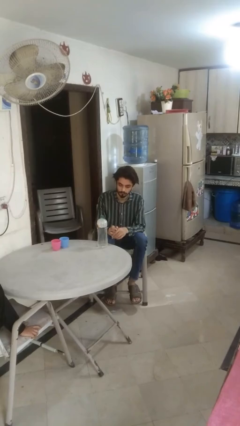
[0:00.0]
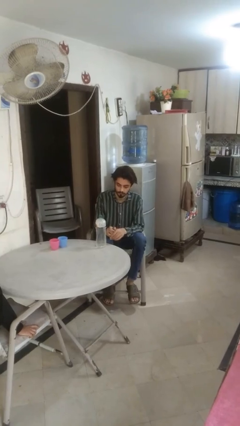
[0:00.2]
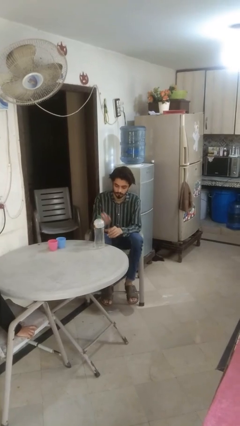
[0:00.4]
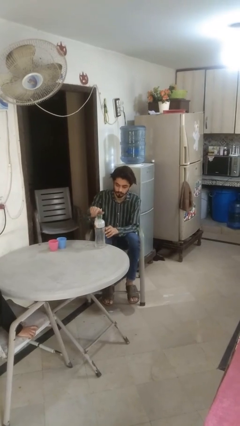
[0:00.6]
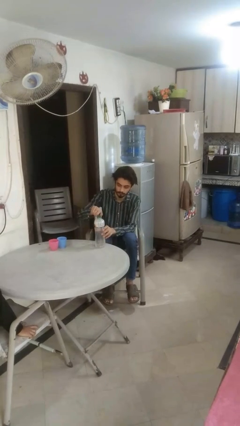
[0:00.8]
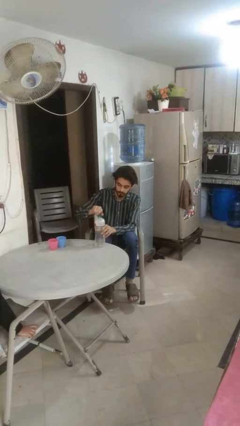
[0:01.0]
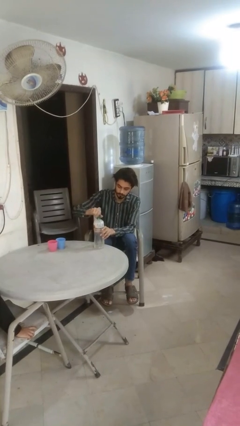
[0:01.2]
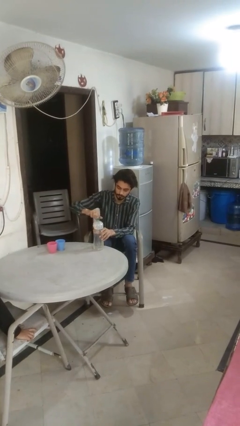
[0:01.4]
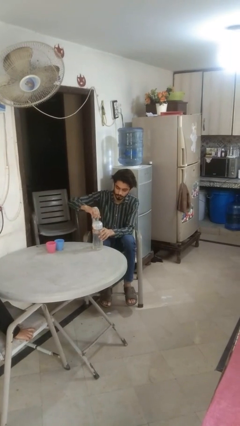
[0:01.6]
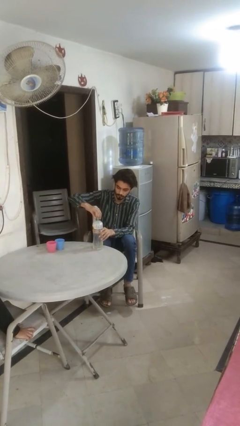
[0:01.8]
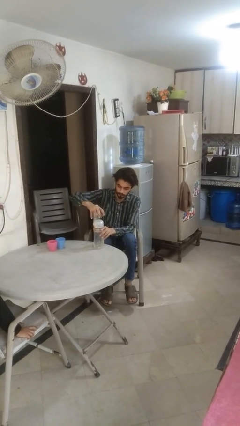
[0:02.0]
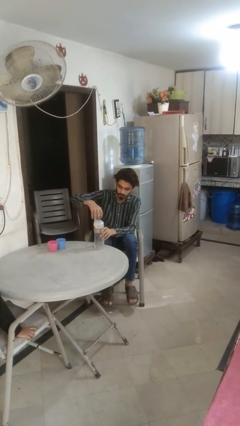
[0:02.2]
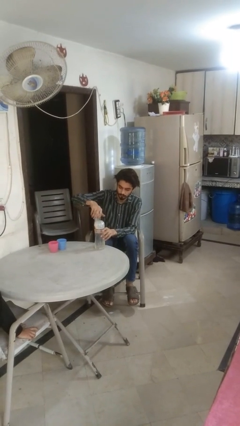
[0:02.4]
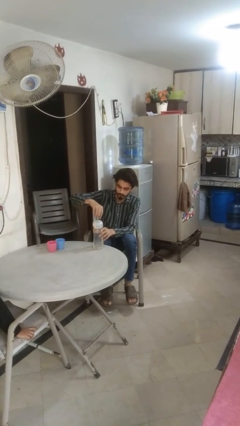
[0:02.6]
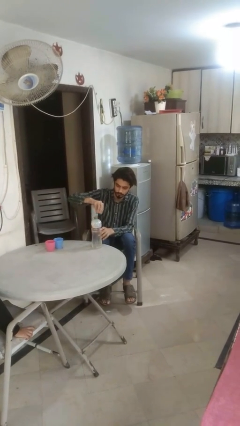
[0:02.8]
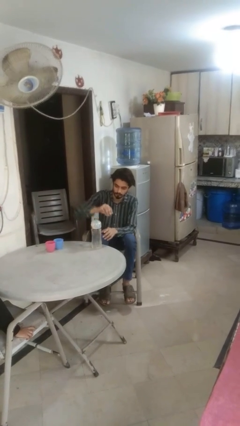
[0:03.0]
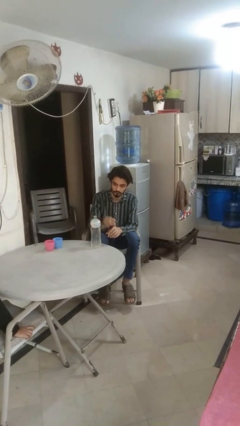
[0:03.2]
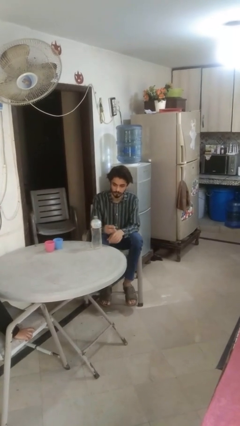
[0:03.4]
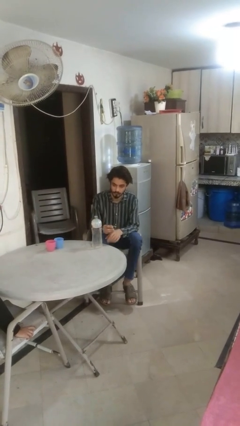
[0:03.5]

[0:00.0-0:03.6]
person unscrews lid from bottle

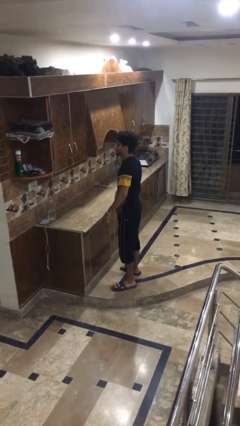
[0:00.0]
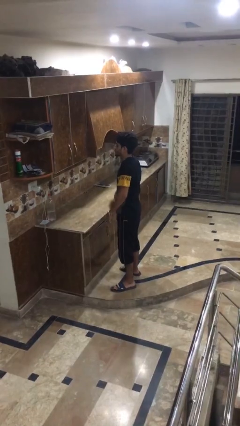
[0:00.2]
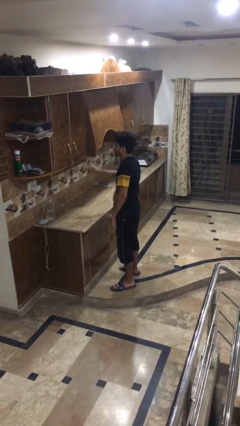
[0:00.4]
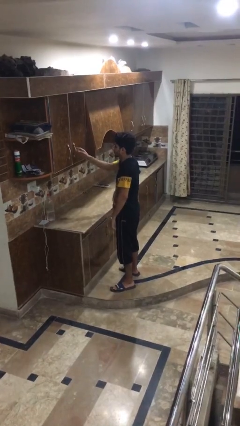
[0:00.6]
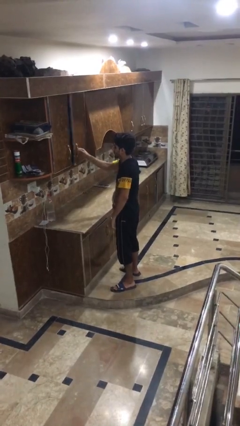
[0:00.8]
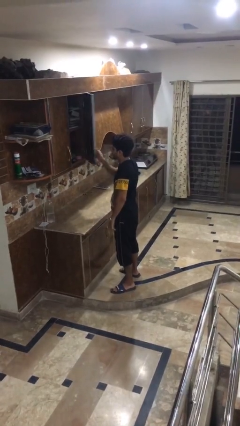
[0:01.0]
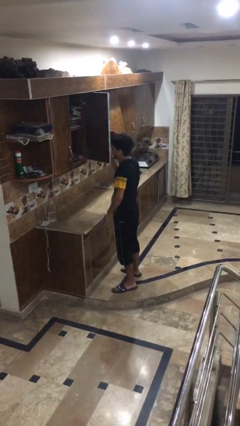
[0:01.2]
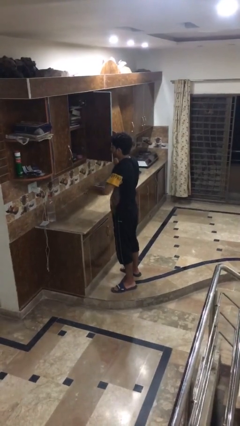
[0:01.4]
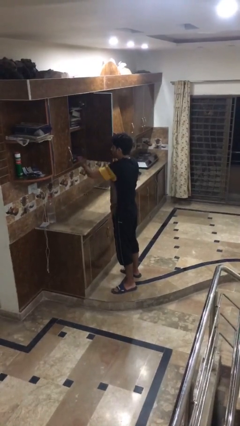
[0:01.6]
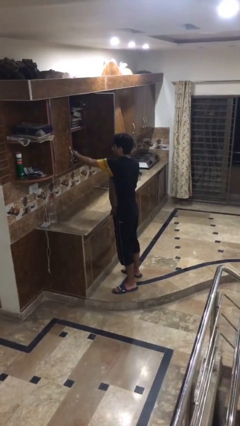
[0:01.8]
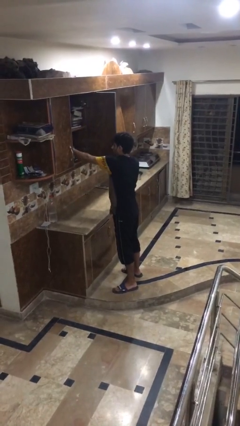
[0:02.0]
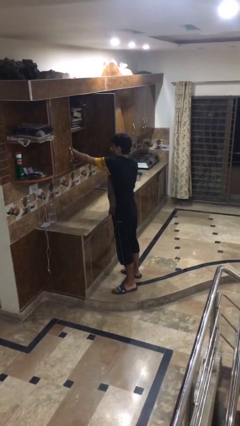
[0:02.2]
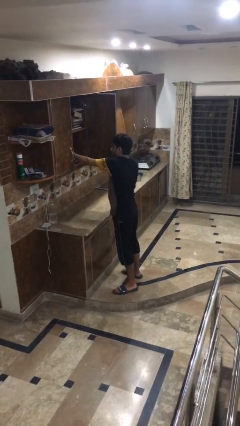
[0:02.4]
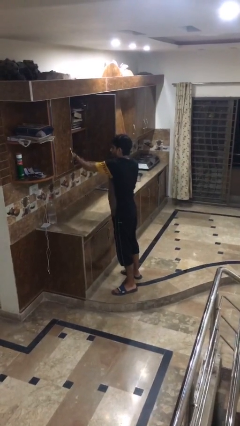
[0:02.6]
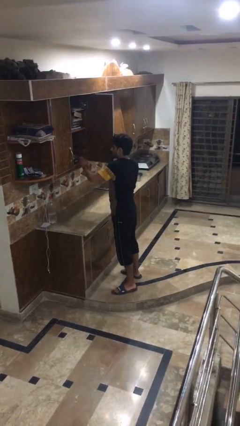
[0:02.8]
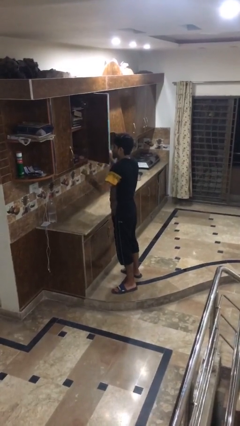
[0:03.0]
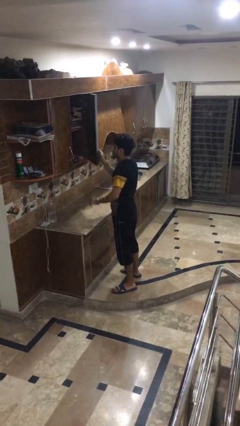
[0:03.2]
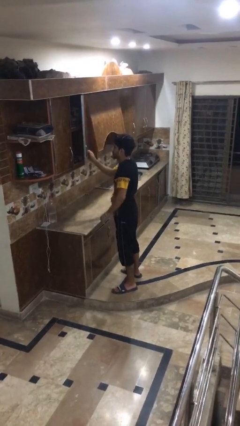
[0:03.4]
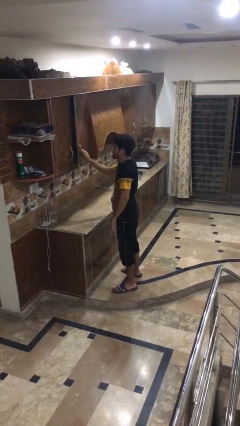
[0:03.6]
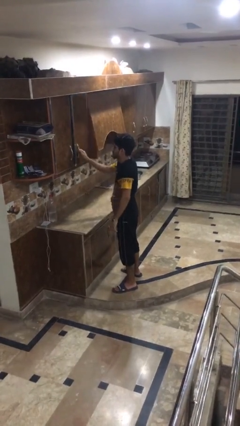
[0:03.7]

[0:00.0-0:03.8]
person searches in cabinet

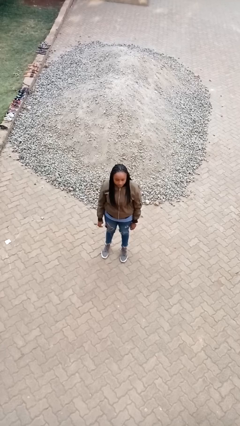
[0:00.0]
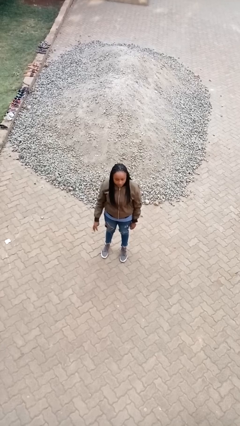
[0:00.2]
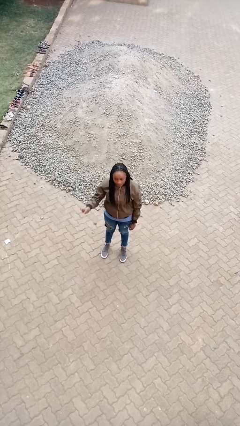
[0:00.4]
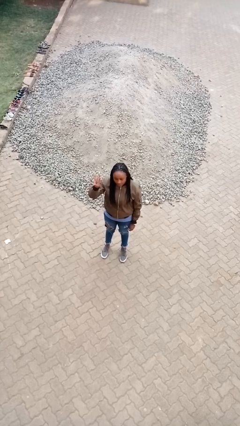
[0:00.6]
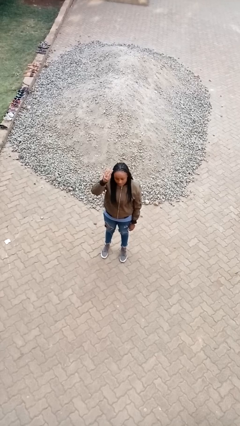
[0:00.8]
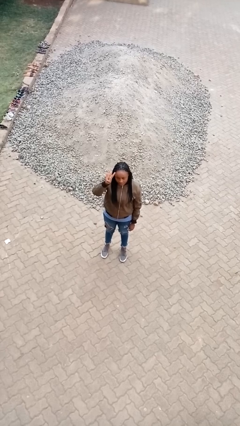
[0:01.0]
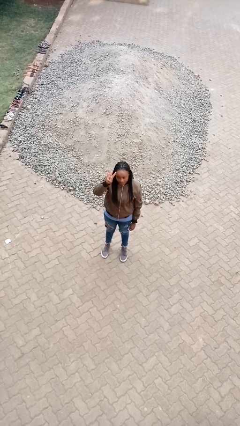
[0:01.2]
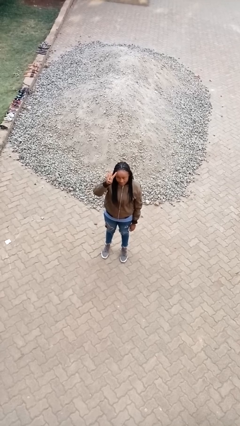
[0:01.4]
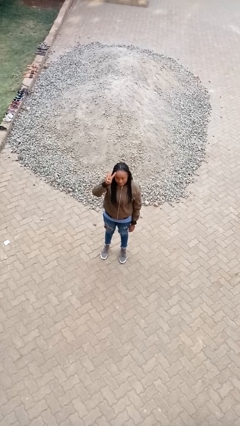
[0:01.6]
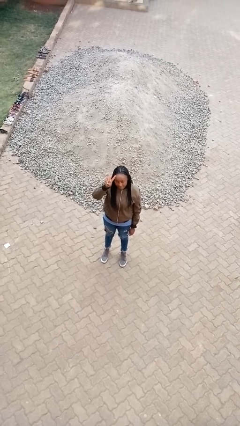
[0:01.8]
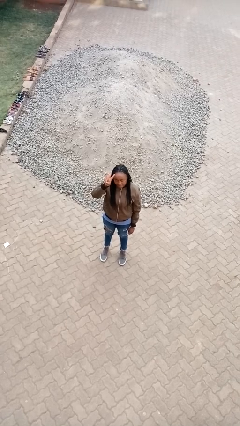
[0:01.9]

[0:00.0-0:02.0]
person gestures number three

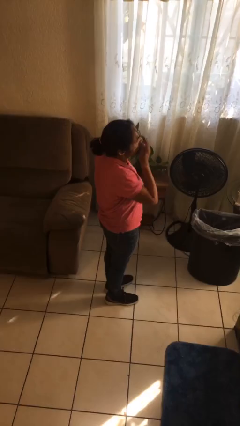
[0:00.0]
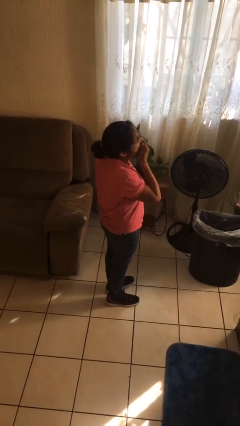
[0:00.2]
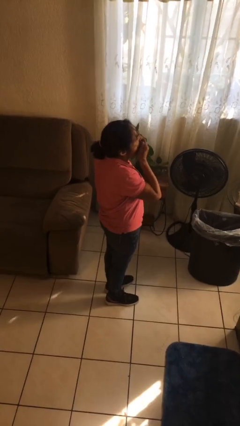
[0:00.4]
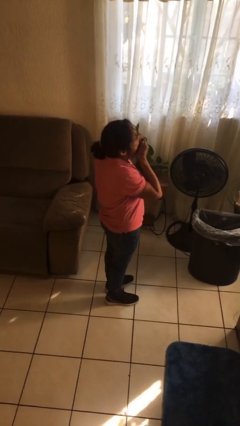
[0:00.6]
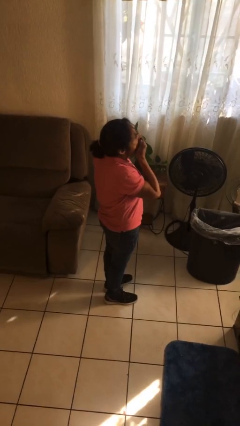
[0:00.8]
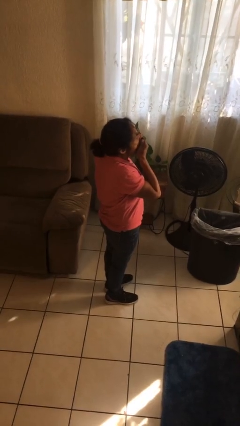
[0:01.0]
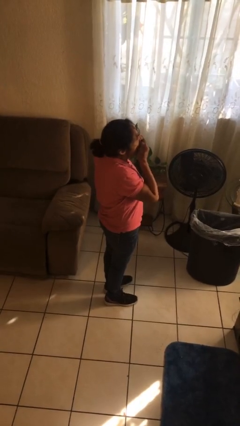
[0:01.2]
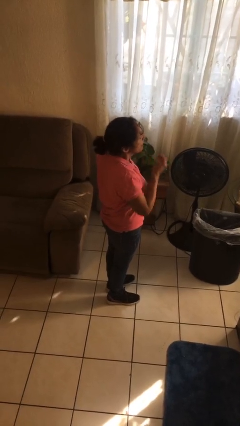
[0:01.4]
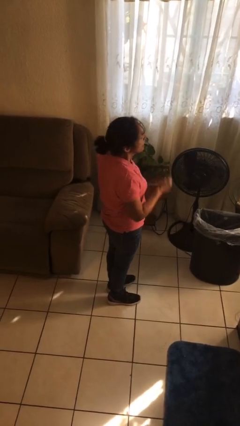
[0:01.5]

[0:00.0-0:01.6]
person yawns

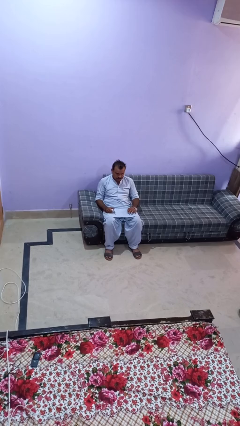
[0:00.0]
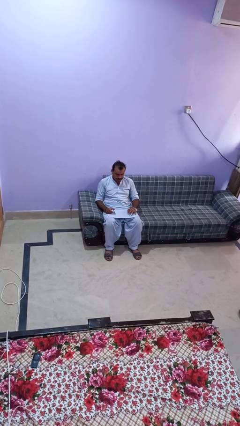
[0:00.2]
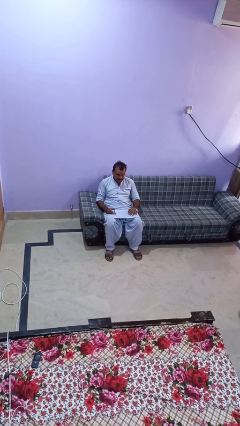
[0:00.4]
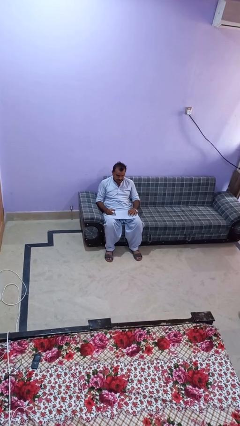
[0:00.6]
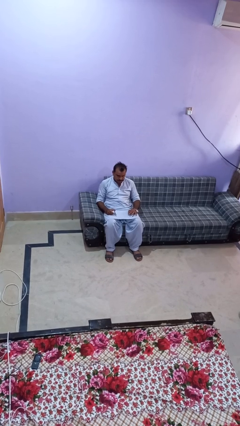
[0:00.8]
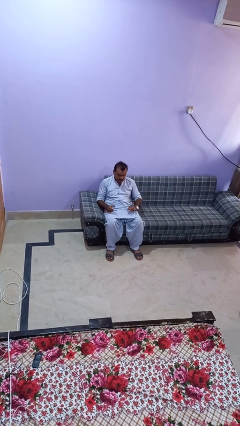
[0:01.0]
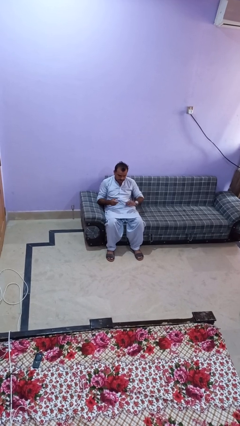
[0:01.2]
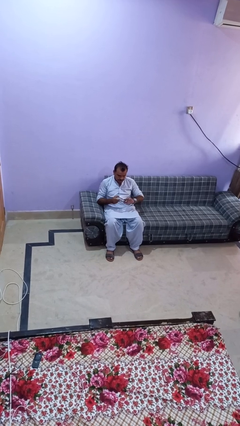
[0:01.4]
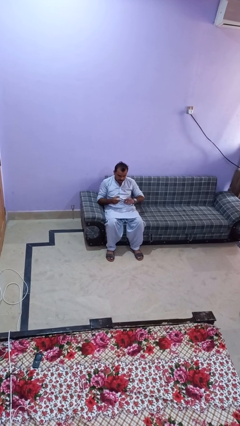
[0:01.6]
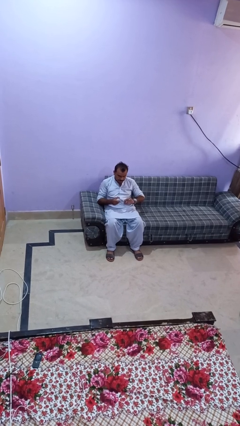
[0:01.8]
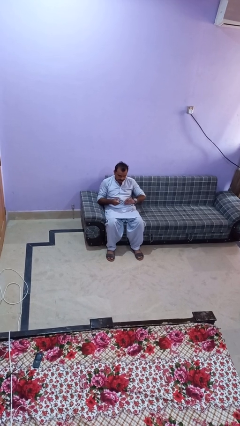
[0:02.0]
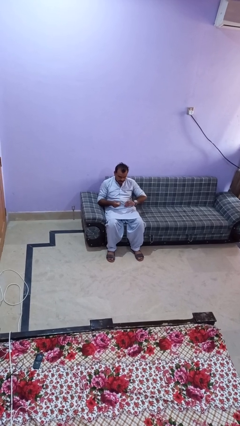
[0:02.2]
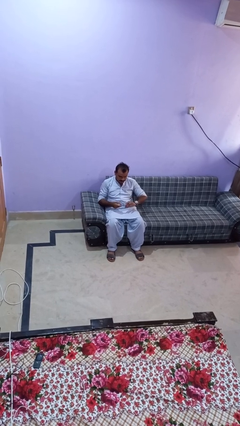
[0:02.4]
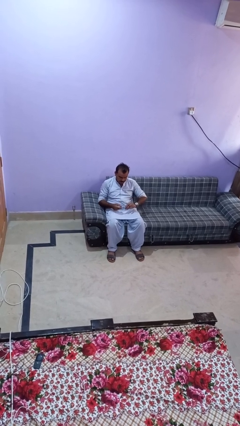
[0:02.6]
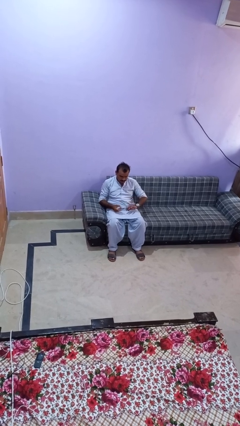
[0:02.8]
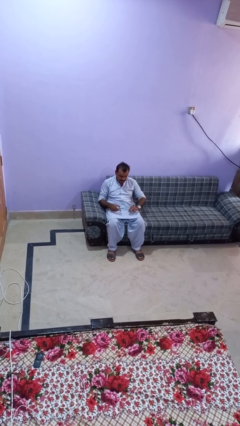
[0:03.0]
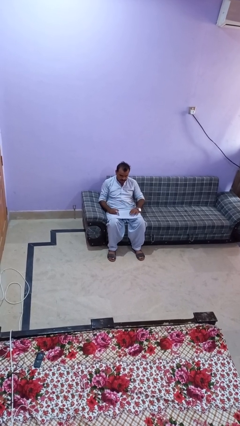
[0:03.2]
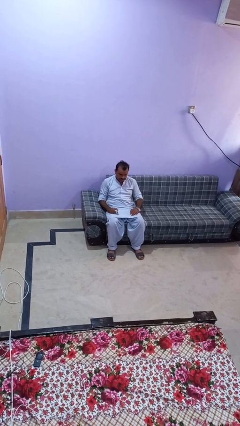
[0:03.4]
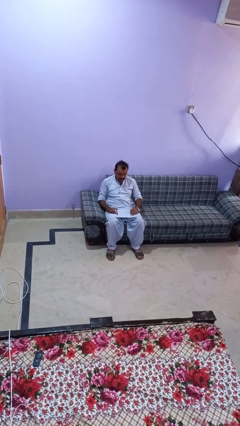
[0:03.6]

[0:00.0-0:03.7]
person clips fingernails

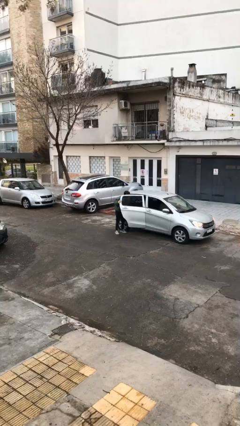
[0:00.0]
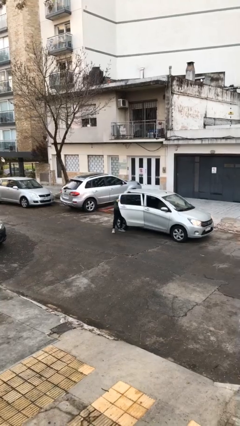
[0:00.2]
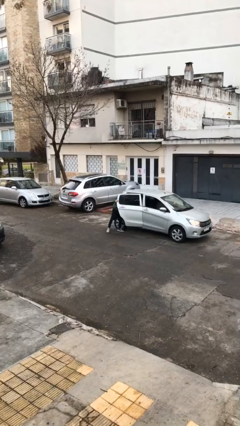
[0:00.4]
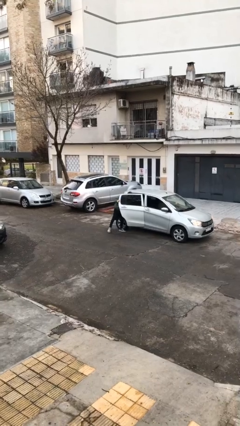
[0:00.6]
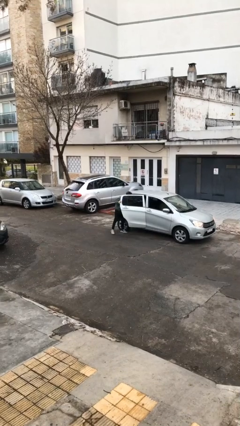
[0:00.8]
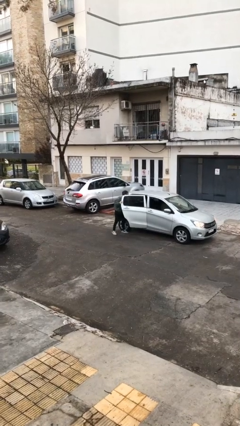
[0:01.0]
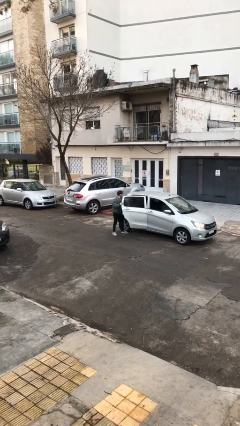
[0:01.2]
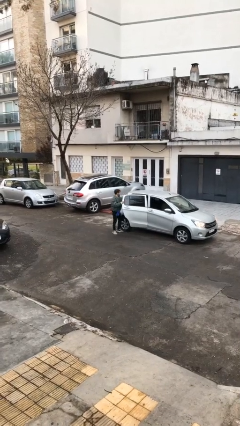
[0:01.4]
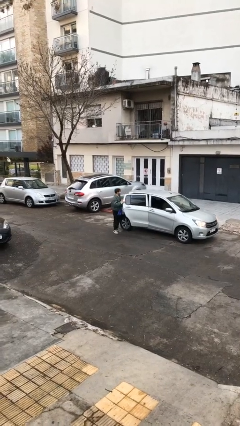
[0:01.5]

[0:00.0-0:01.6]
person unloads car

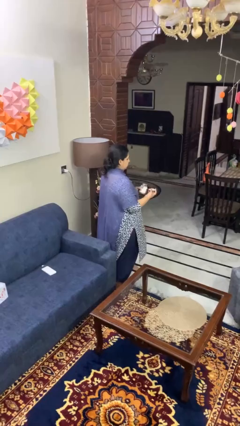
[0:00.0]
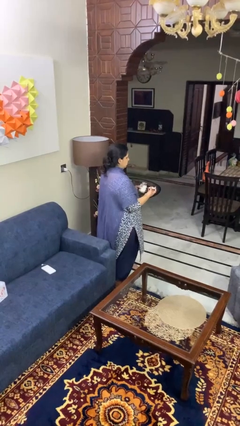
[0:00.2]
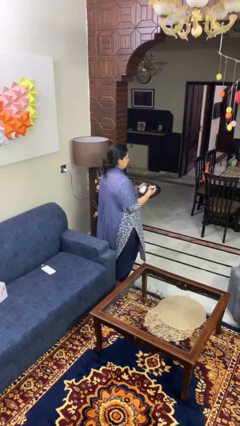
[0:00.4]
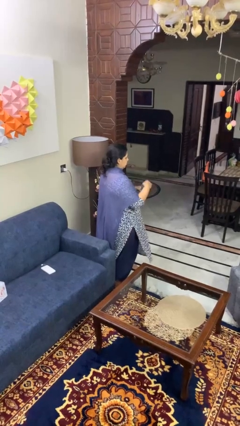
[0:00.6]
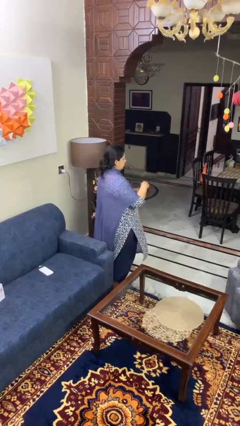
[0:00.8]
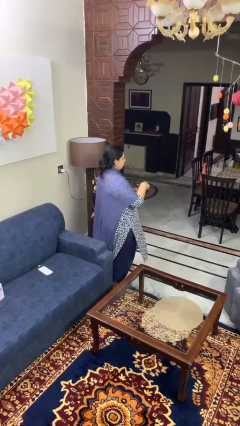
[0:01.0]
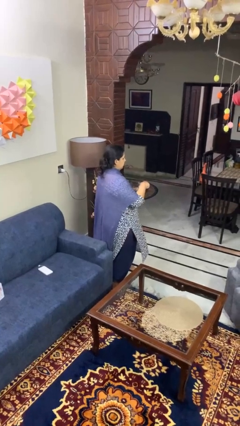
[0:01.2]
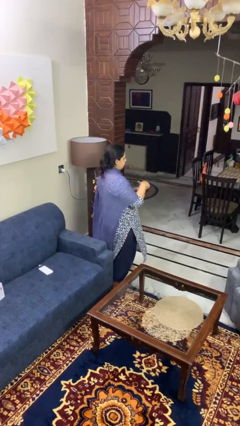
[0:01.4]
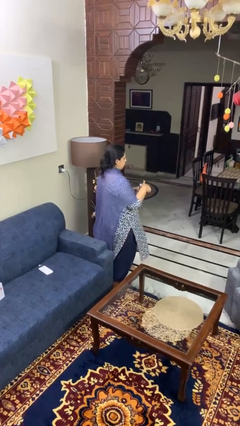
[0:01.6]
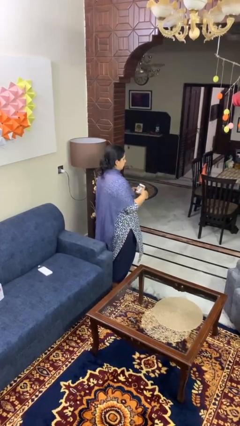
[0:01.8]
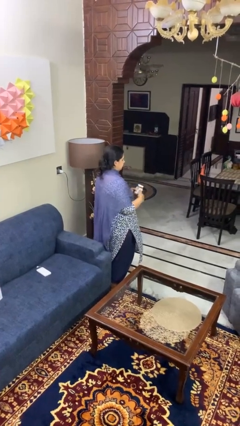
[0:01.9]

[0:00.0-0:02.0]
person closes jar
